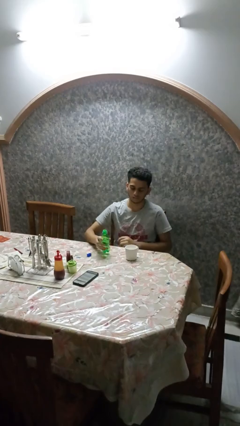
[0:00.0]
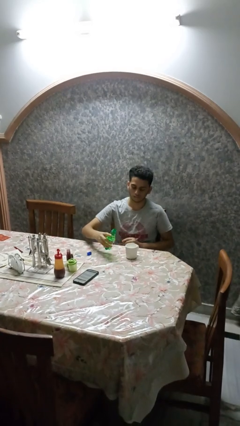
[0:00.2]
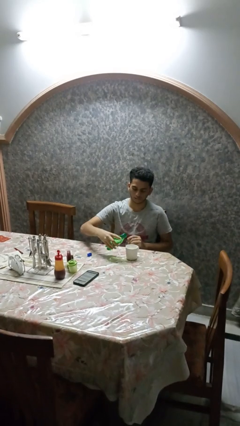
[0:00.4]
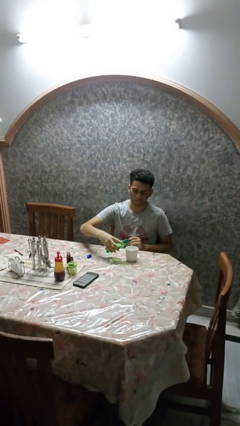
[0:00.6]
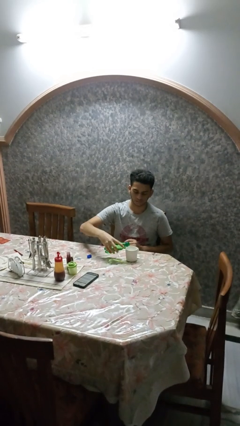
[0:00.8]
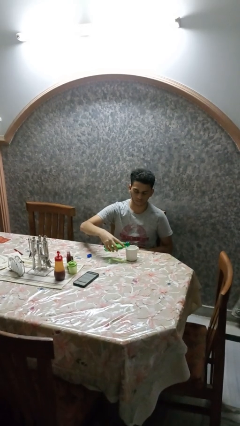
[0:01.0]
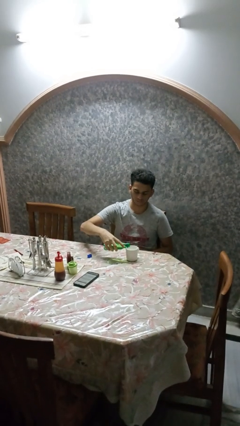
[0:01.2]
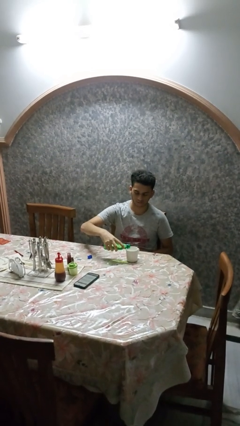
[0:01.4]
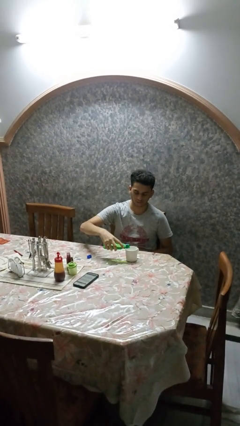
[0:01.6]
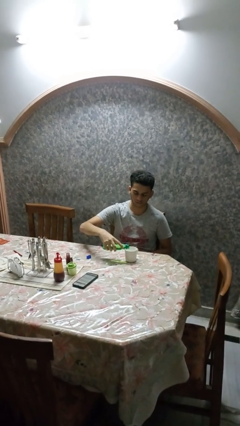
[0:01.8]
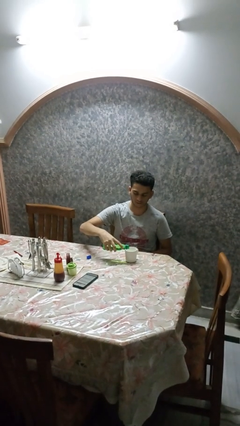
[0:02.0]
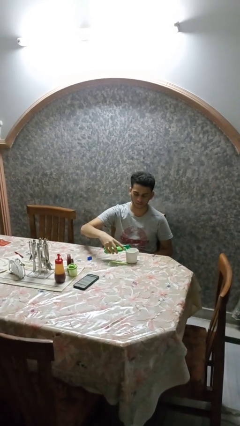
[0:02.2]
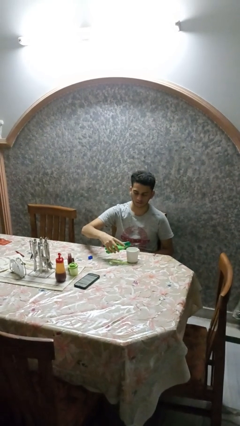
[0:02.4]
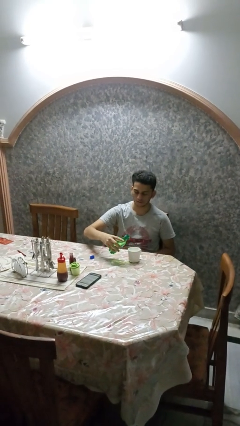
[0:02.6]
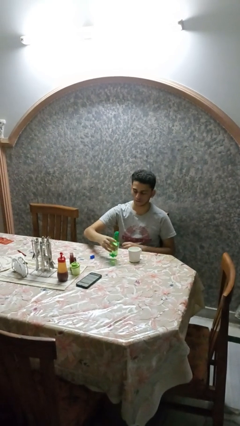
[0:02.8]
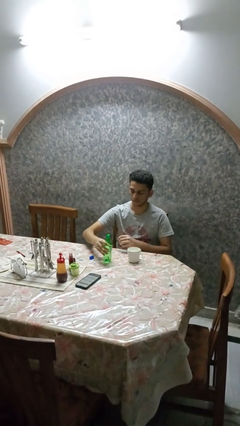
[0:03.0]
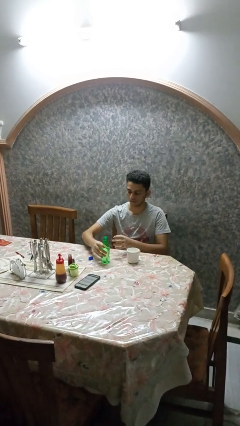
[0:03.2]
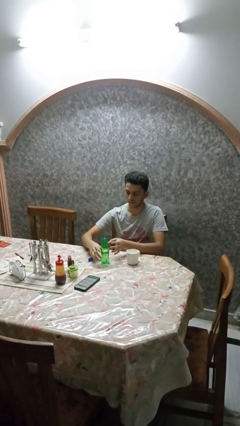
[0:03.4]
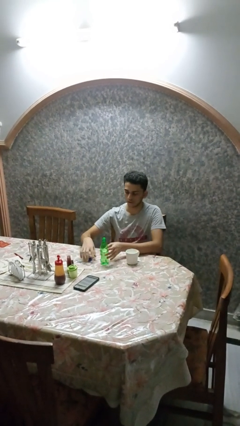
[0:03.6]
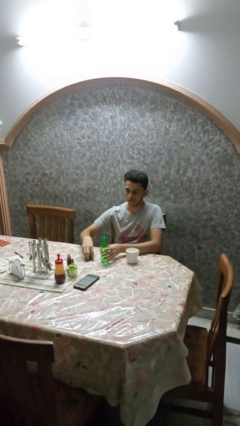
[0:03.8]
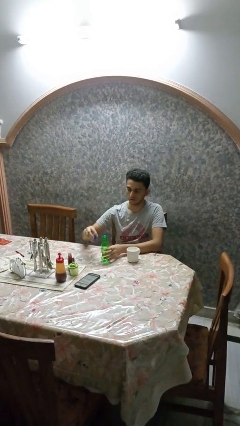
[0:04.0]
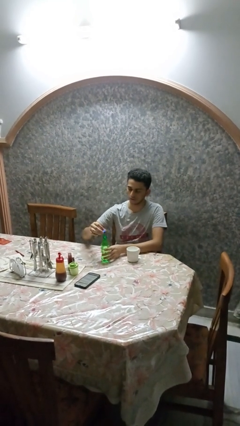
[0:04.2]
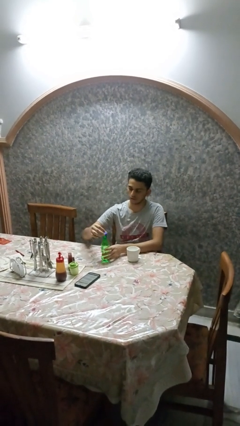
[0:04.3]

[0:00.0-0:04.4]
person pours liquid into cup

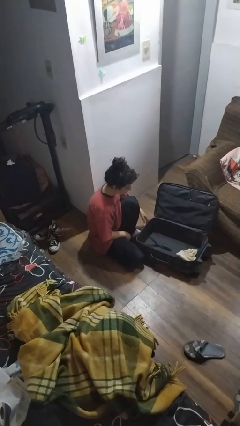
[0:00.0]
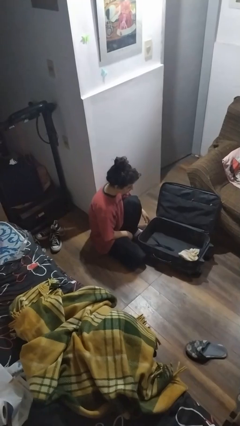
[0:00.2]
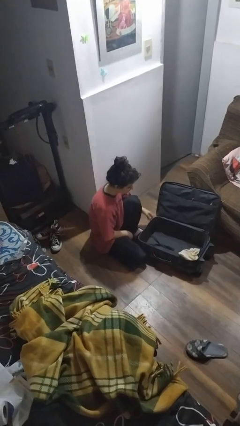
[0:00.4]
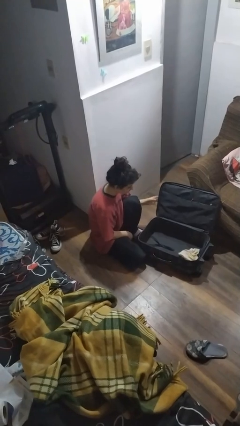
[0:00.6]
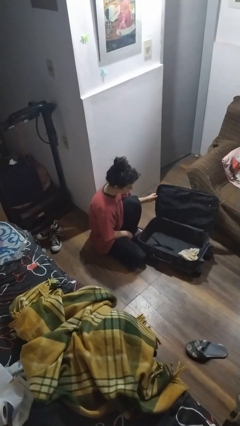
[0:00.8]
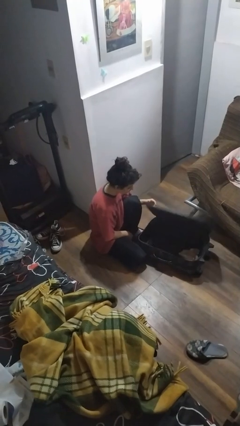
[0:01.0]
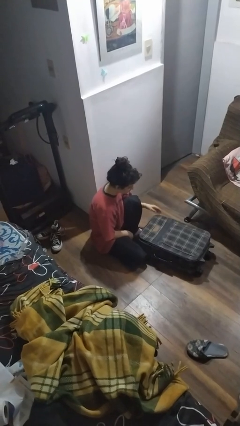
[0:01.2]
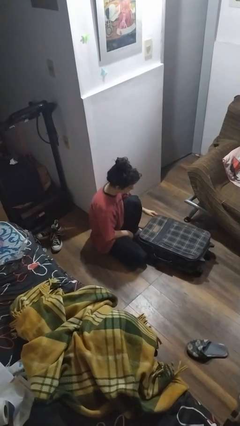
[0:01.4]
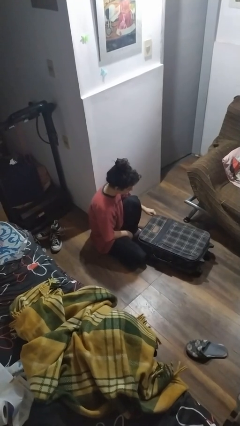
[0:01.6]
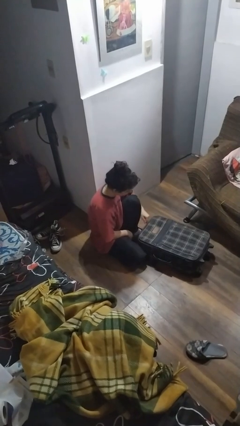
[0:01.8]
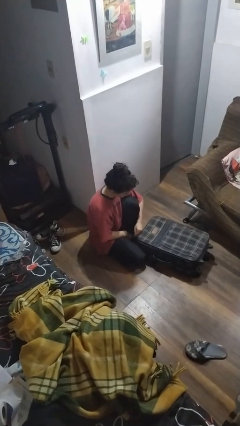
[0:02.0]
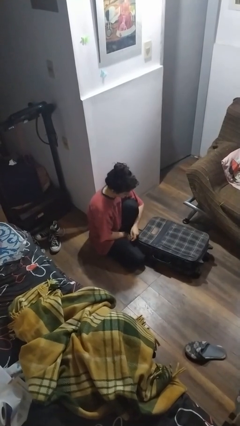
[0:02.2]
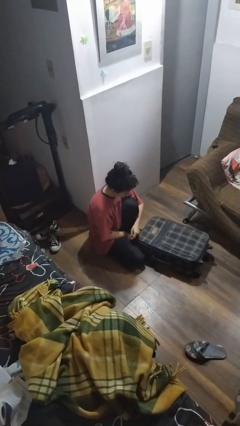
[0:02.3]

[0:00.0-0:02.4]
person closes suitcase

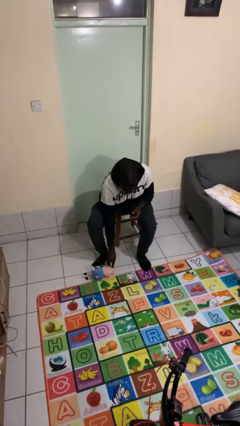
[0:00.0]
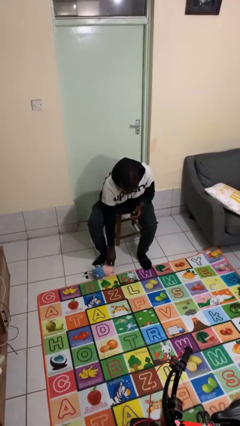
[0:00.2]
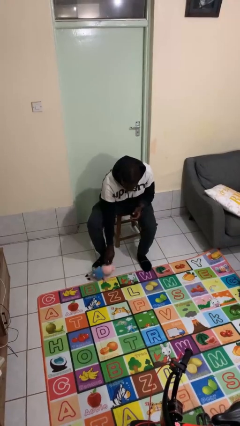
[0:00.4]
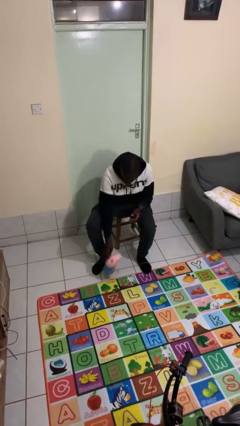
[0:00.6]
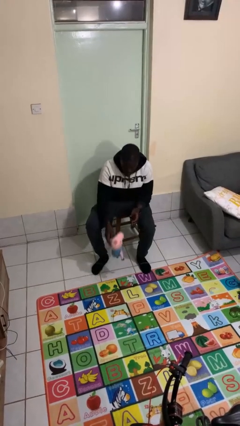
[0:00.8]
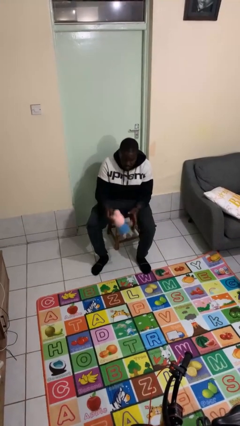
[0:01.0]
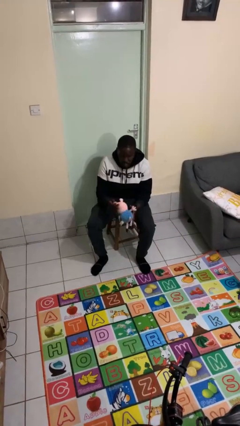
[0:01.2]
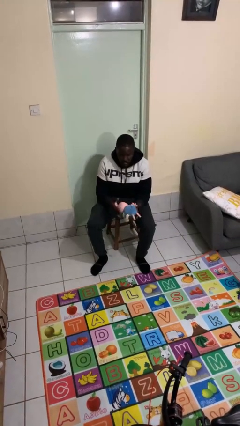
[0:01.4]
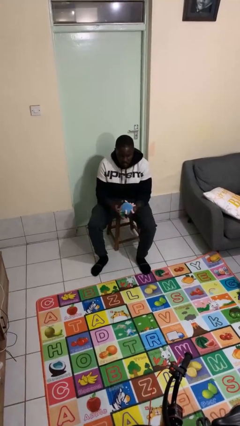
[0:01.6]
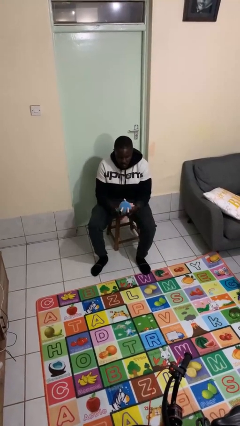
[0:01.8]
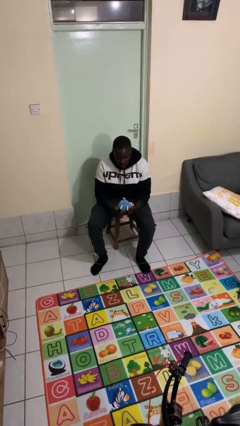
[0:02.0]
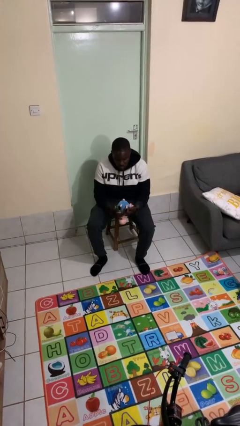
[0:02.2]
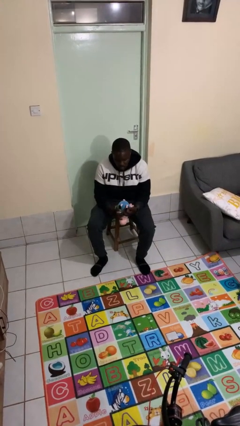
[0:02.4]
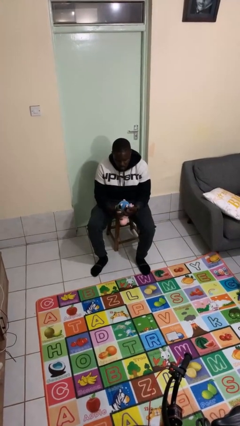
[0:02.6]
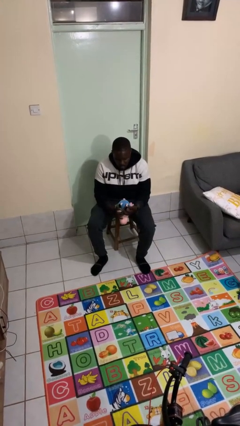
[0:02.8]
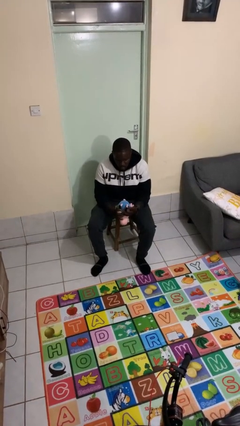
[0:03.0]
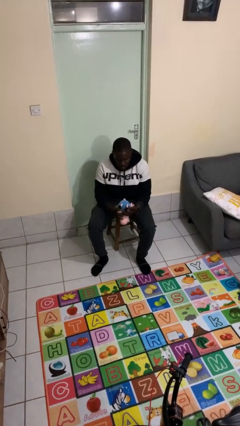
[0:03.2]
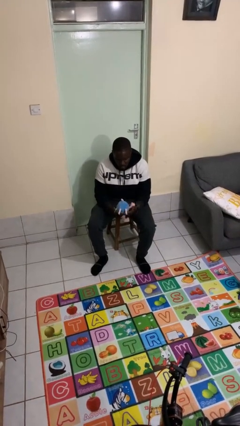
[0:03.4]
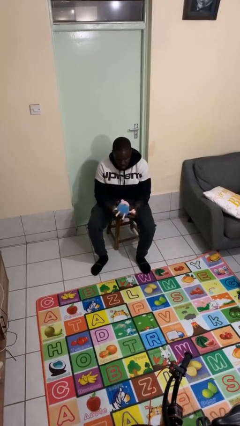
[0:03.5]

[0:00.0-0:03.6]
person picks up object from floor

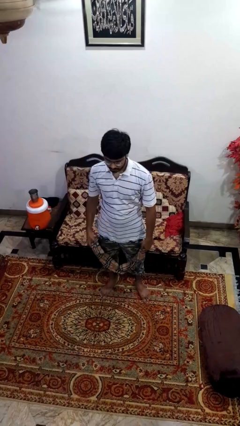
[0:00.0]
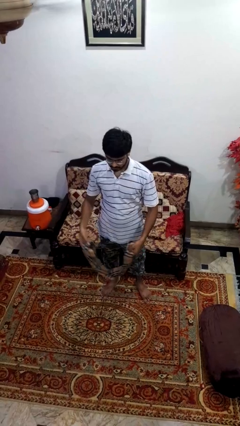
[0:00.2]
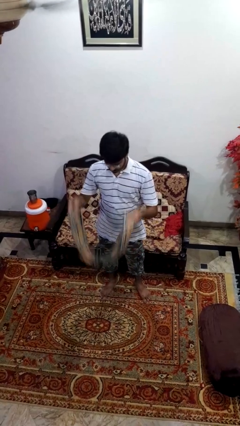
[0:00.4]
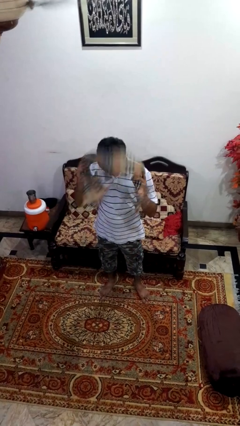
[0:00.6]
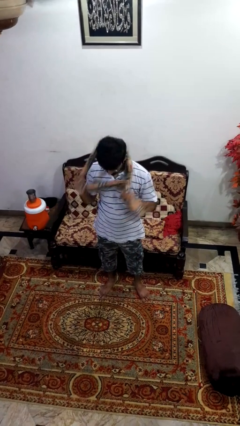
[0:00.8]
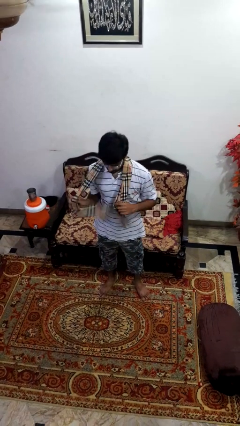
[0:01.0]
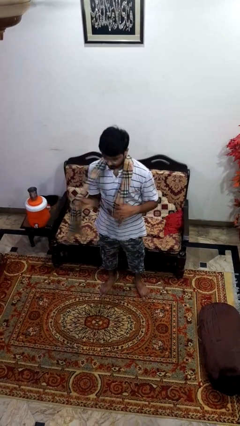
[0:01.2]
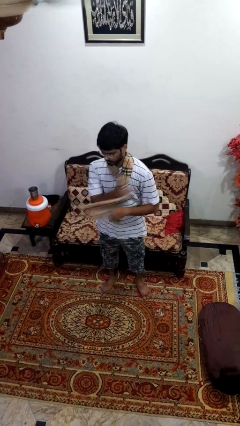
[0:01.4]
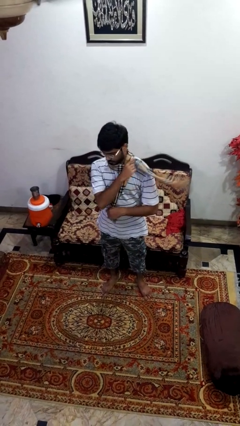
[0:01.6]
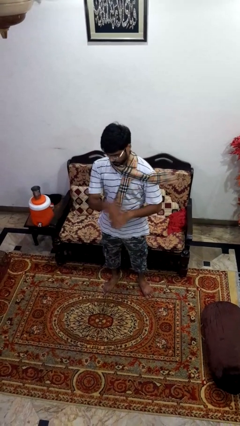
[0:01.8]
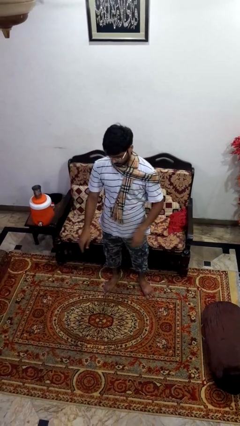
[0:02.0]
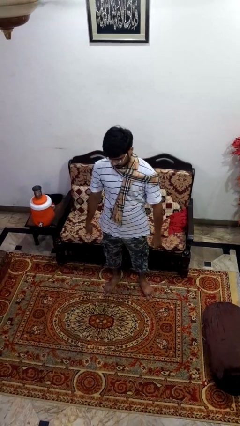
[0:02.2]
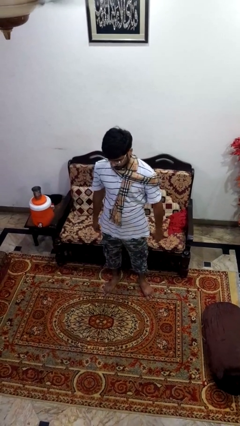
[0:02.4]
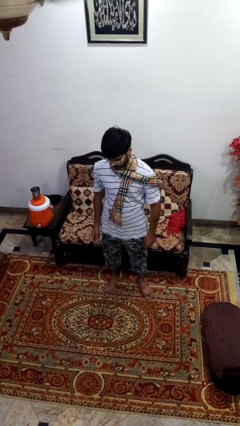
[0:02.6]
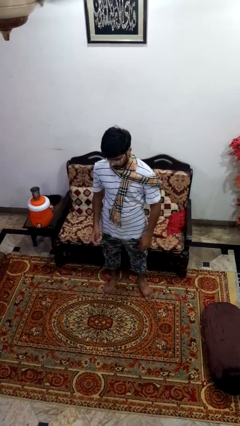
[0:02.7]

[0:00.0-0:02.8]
person puts on scarf

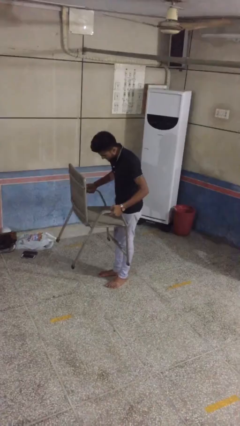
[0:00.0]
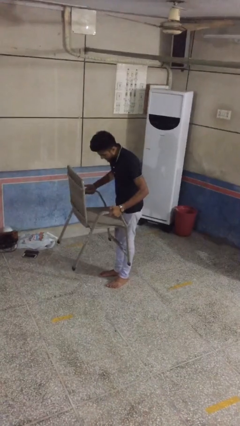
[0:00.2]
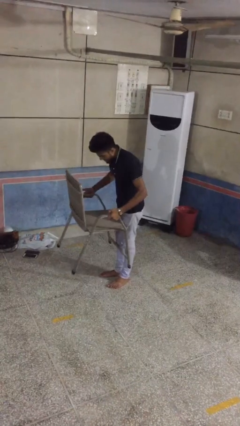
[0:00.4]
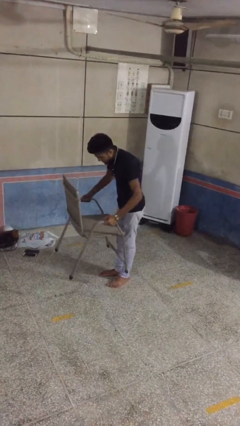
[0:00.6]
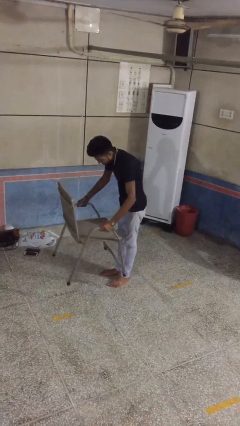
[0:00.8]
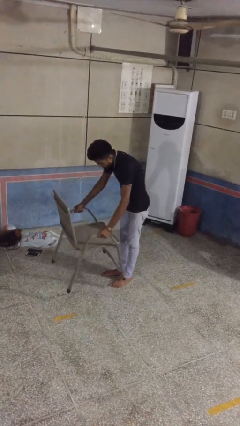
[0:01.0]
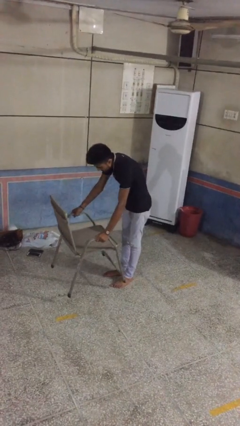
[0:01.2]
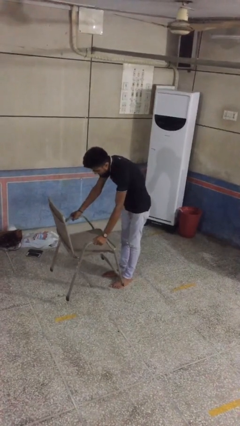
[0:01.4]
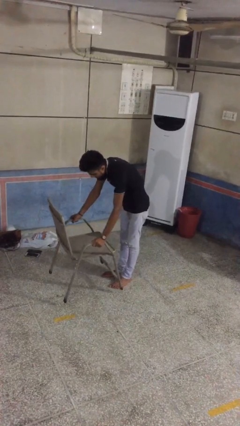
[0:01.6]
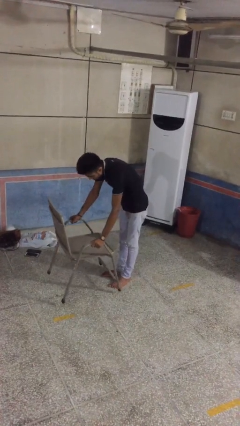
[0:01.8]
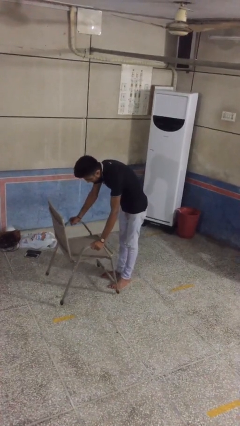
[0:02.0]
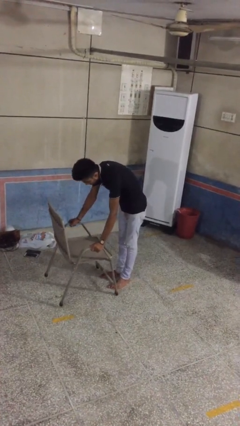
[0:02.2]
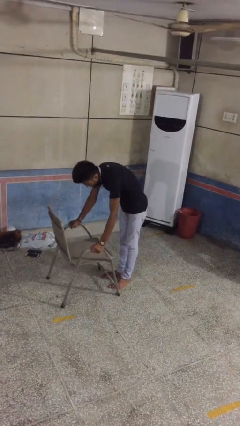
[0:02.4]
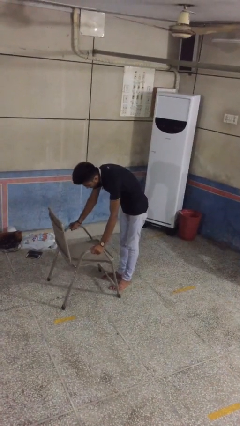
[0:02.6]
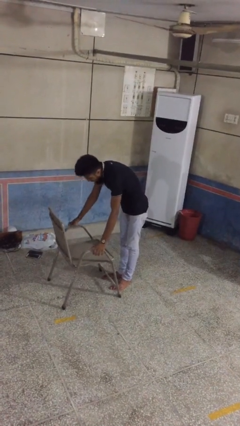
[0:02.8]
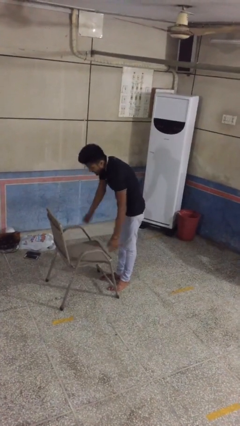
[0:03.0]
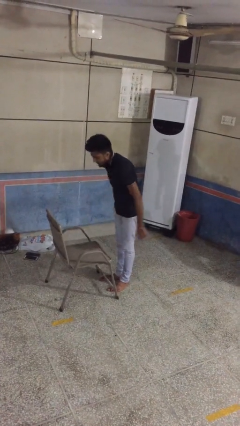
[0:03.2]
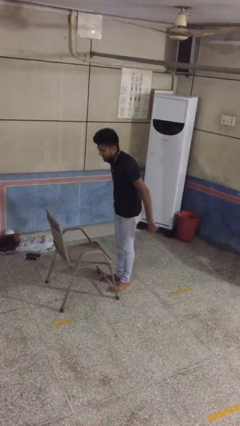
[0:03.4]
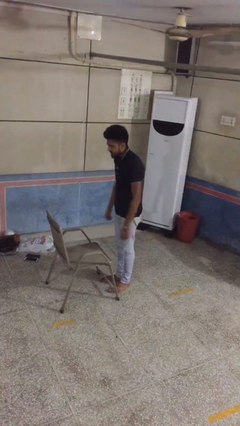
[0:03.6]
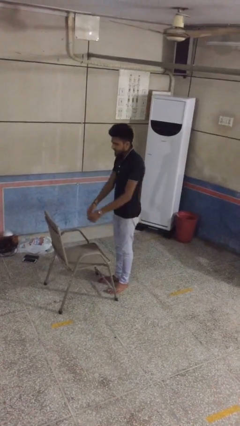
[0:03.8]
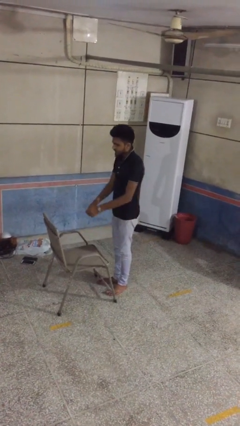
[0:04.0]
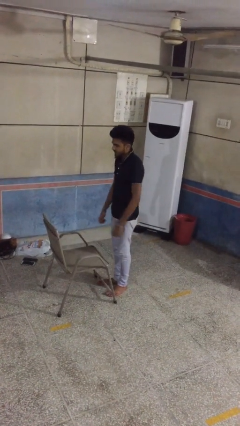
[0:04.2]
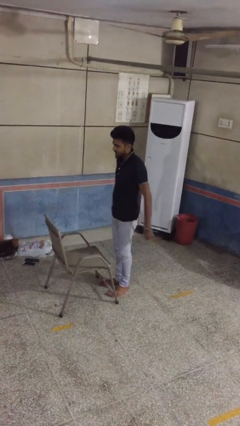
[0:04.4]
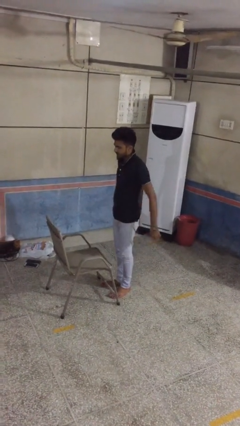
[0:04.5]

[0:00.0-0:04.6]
person puts down object on floor
